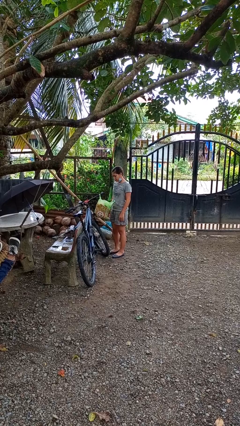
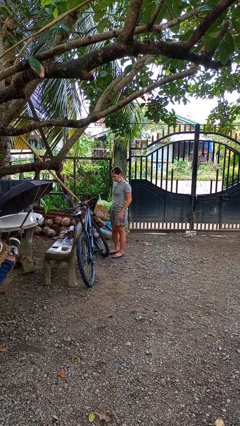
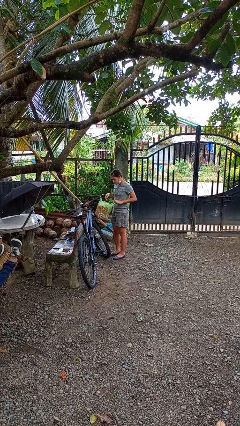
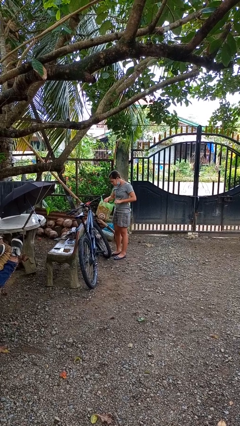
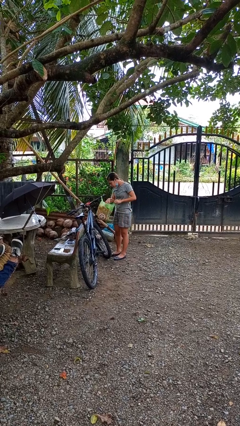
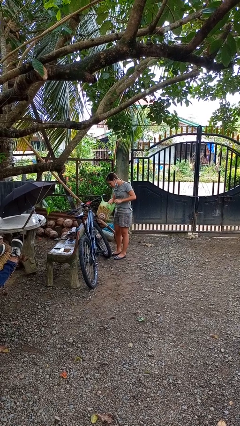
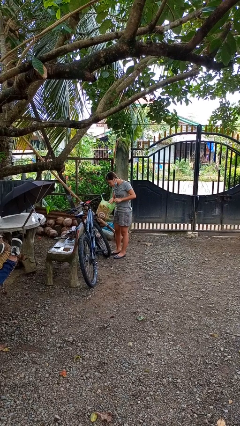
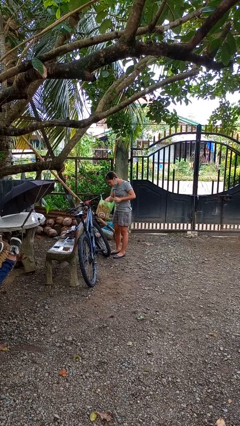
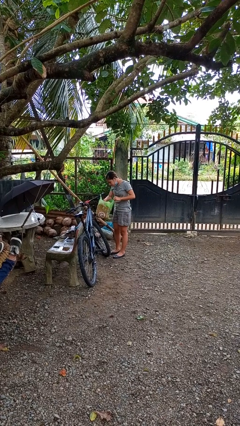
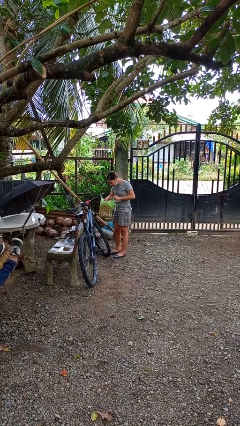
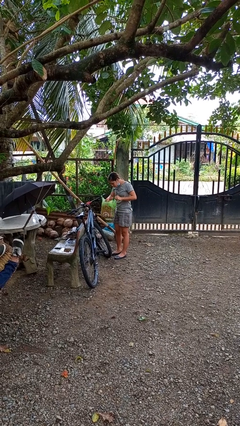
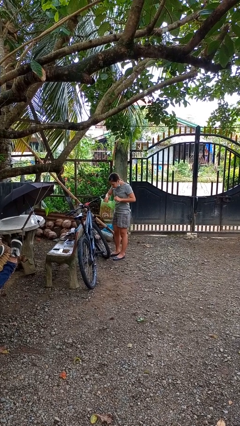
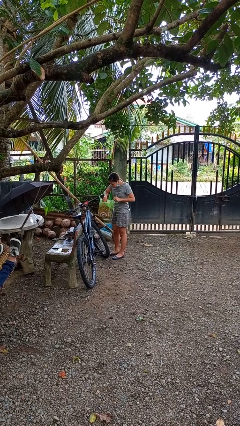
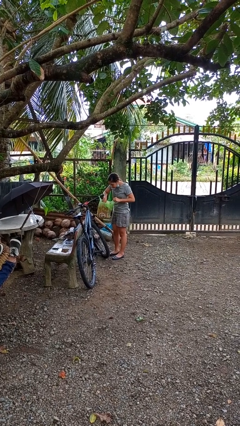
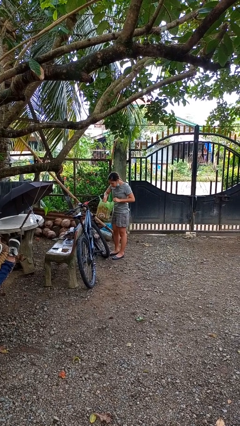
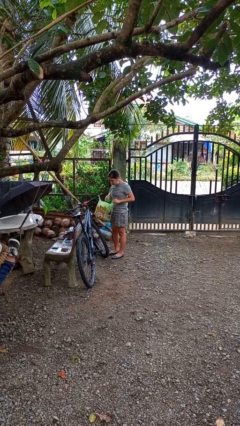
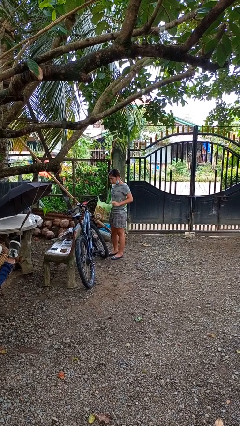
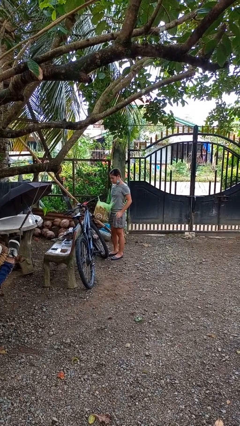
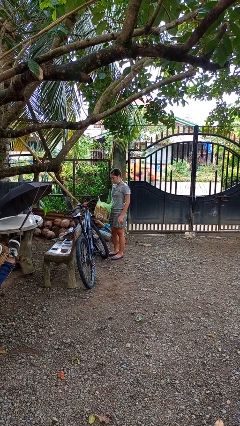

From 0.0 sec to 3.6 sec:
person searches in bag

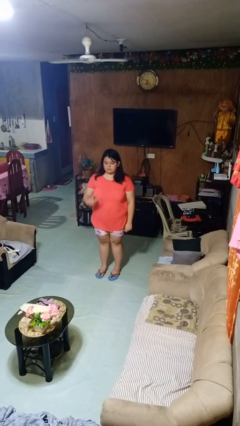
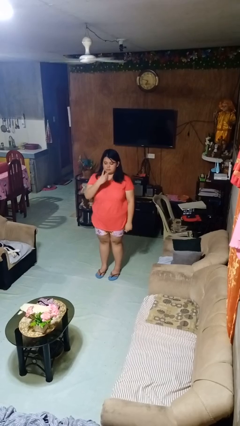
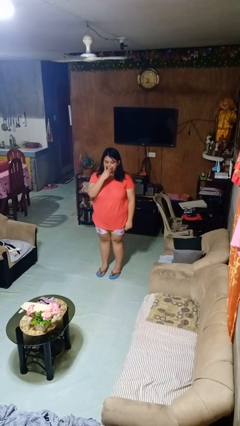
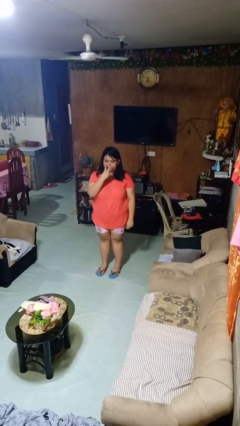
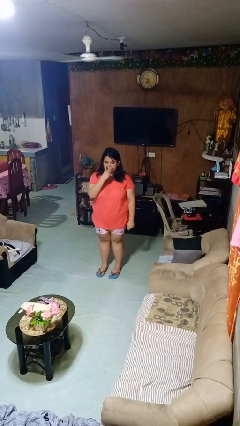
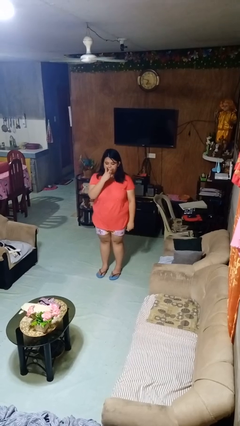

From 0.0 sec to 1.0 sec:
person gestures watch closely

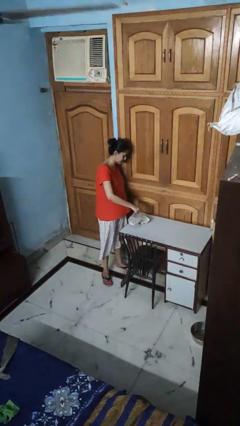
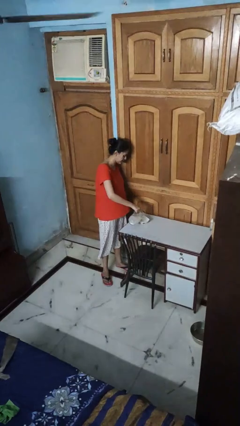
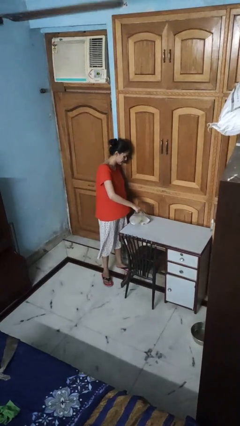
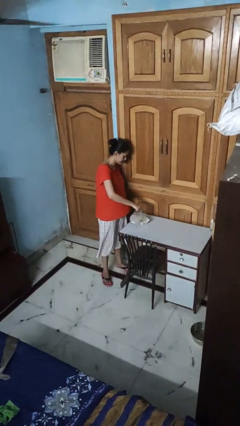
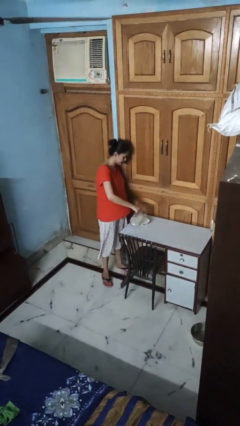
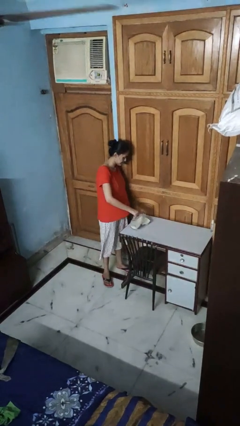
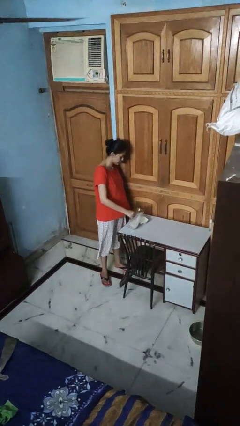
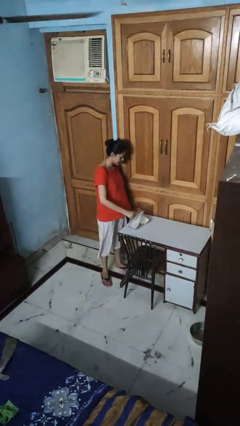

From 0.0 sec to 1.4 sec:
person pours into bowl

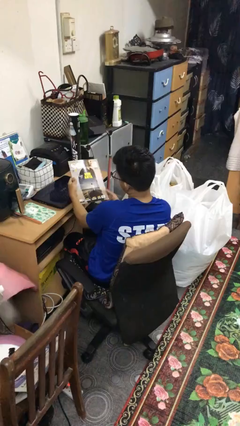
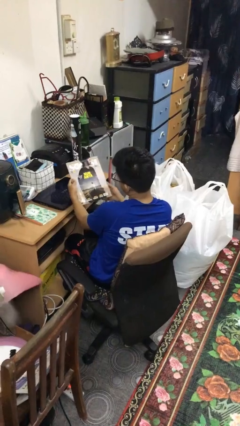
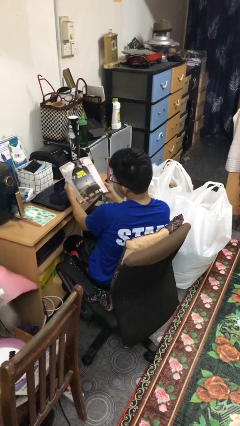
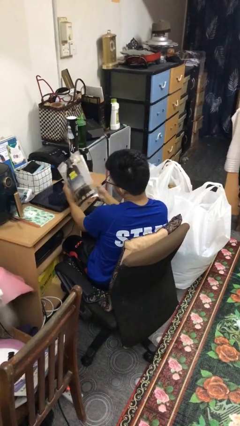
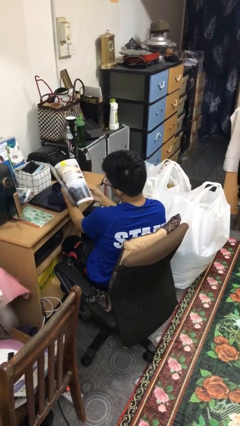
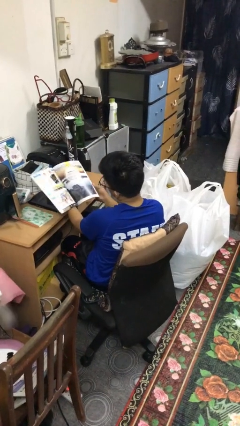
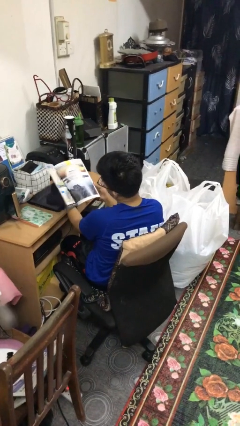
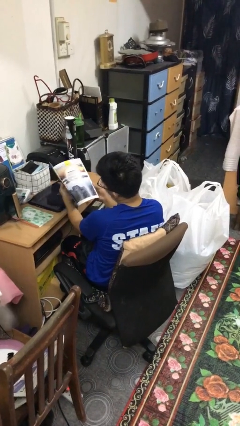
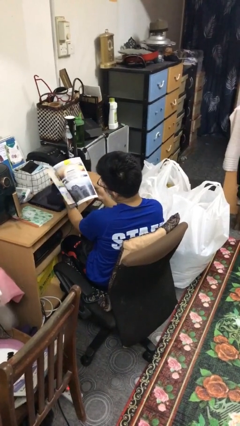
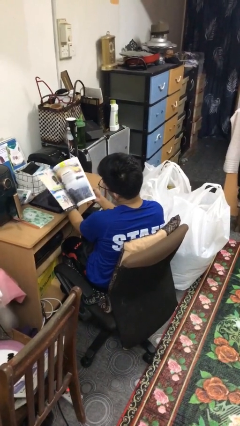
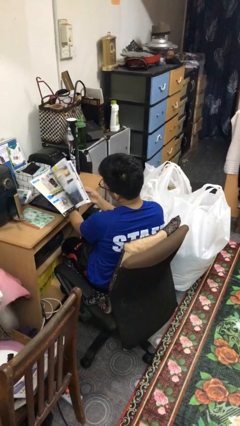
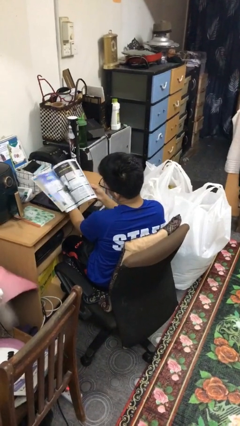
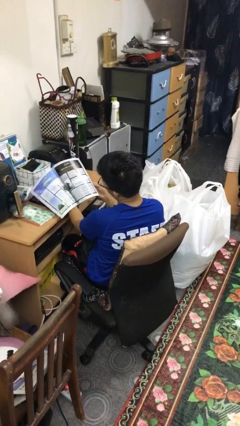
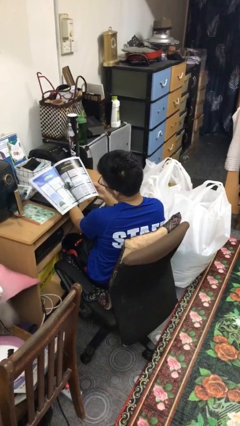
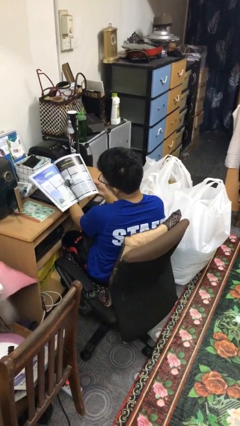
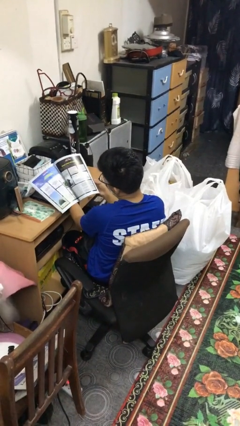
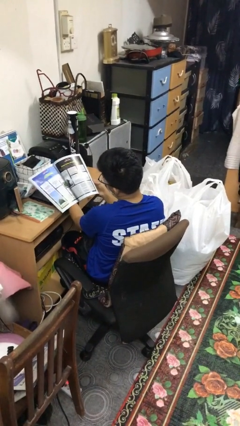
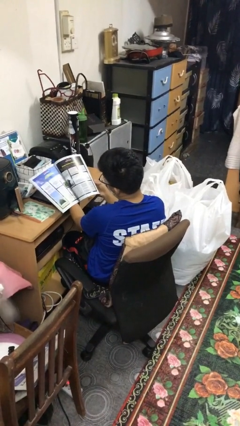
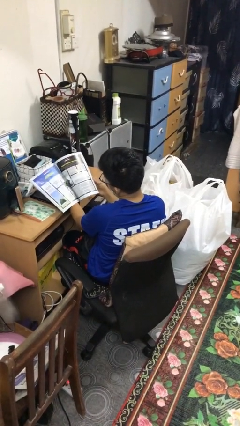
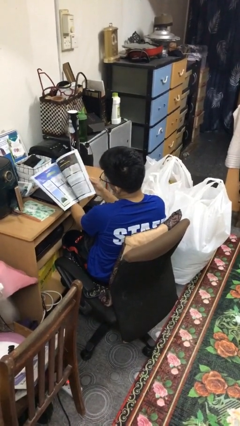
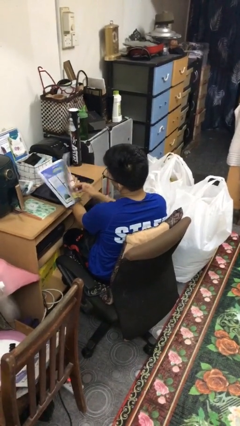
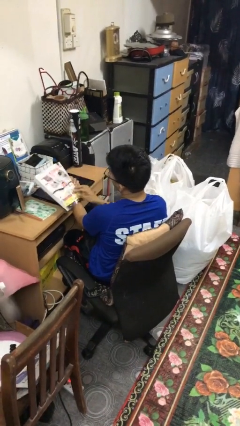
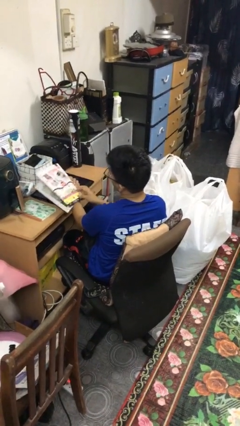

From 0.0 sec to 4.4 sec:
person reads magazine

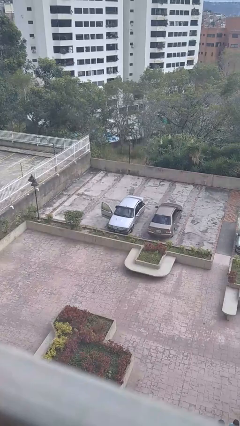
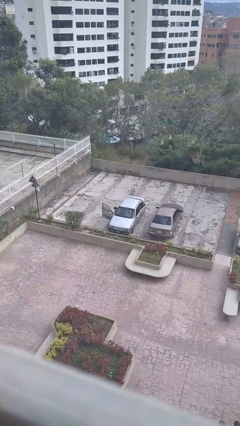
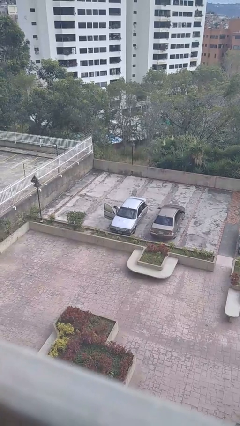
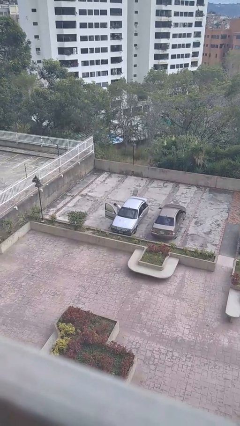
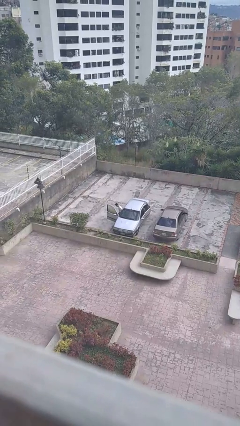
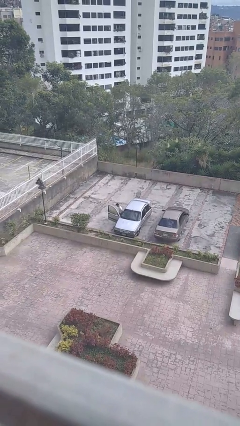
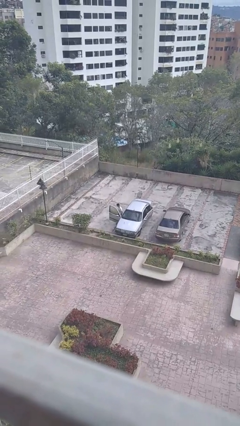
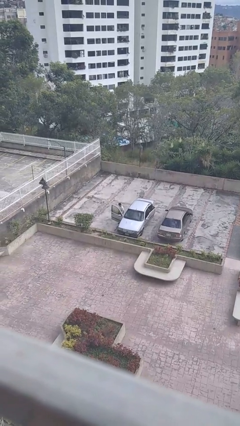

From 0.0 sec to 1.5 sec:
person exits car

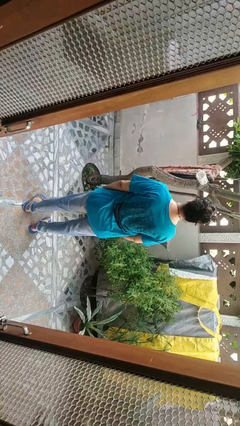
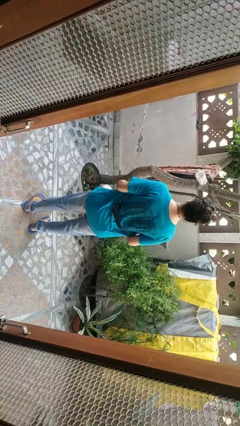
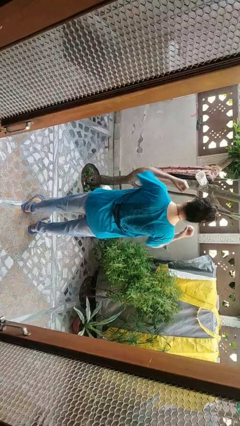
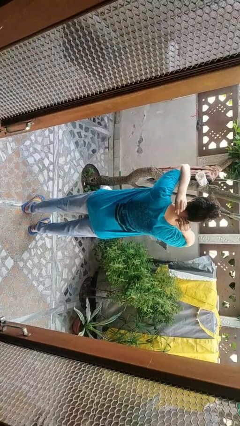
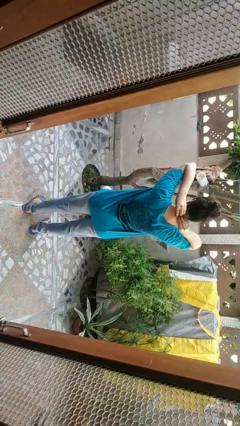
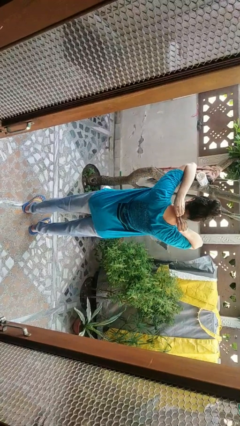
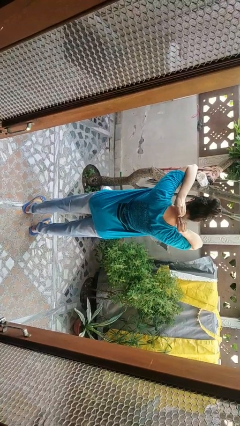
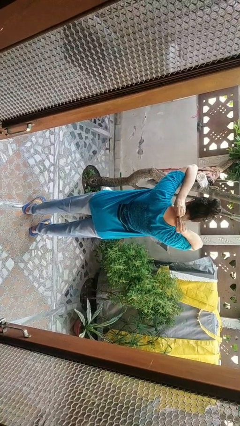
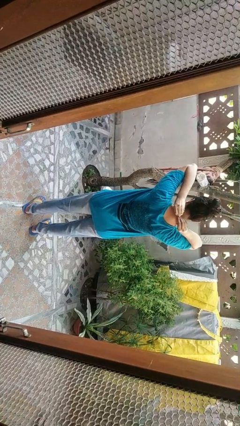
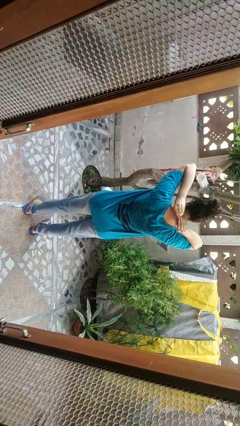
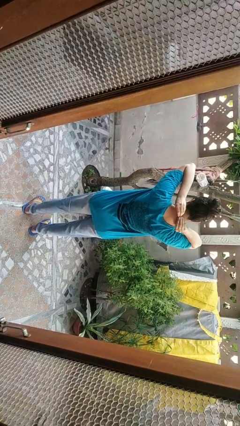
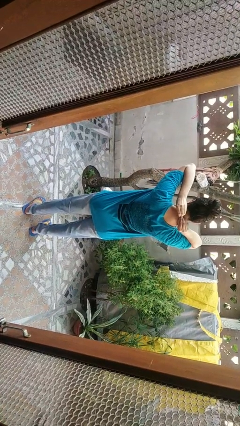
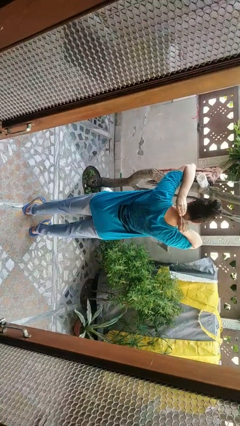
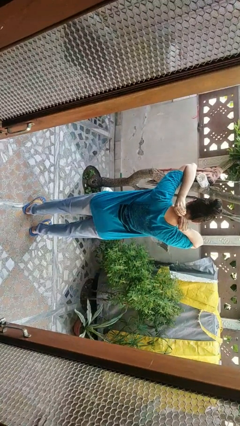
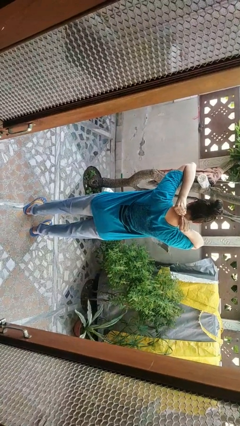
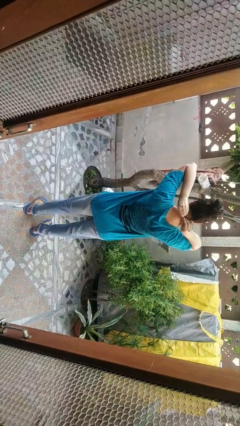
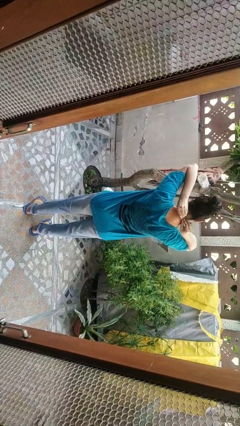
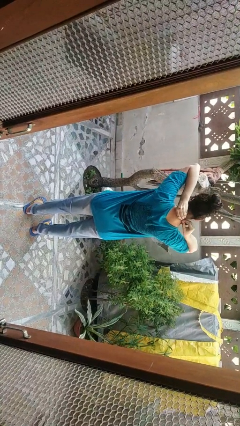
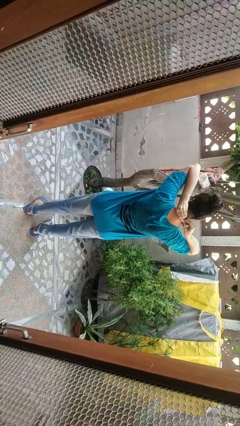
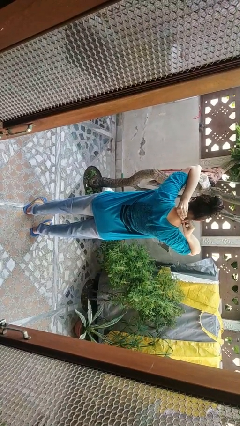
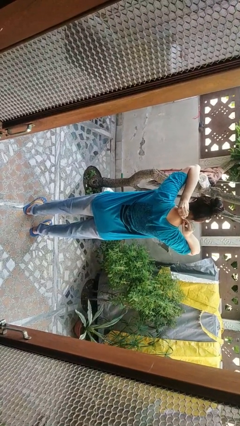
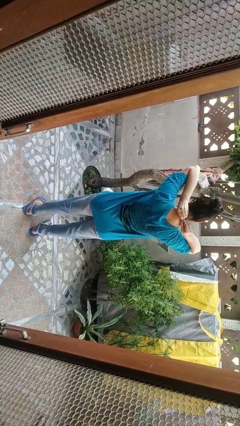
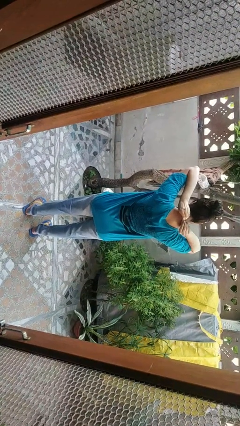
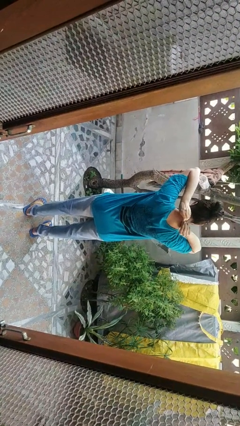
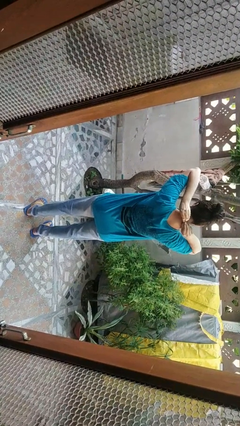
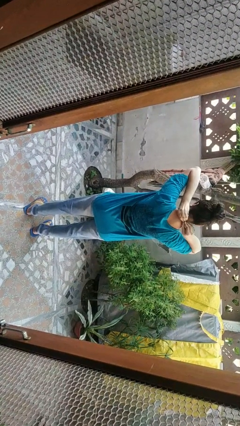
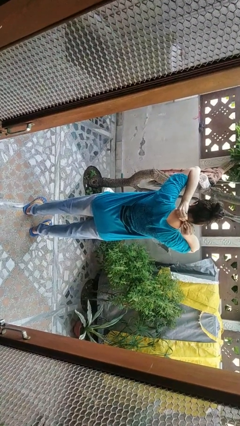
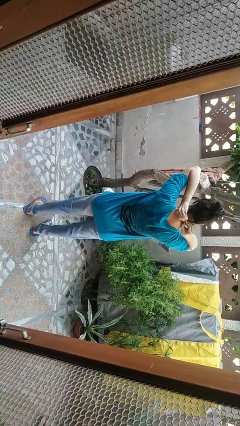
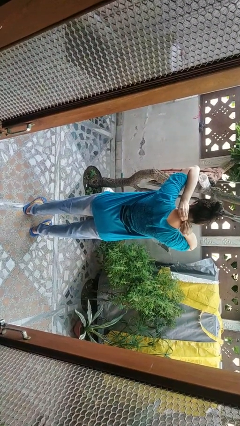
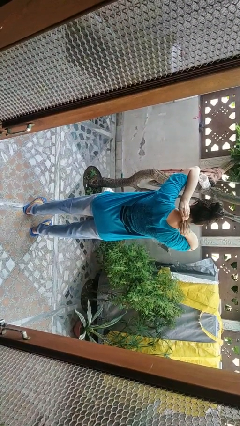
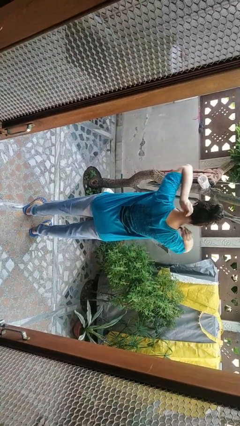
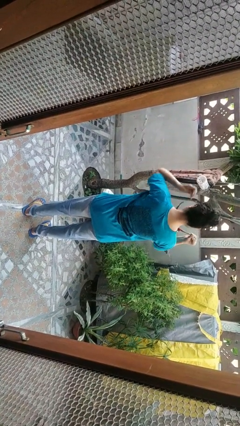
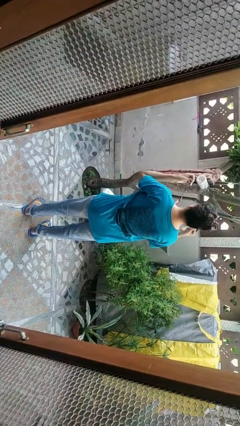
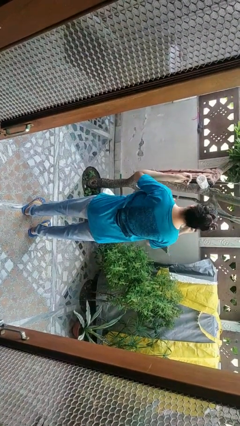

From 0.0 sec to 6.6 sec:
person takes off necklace
